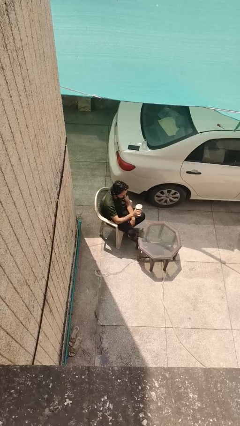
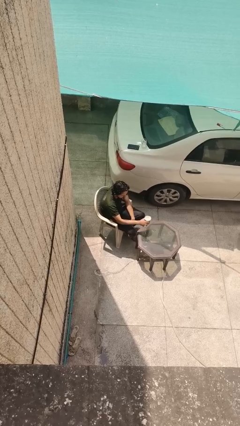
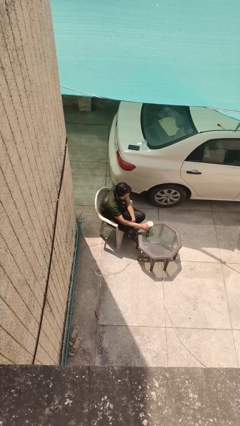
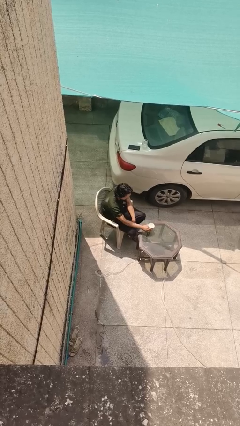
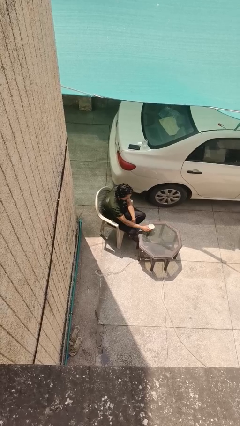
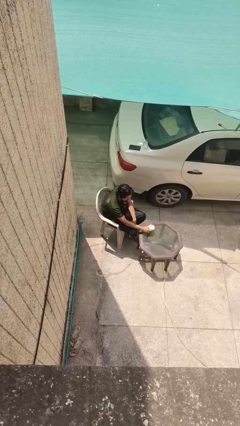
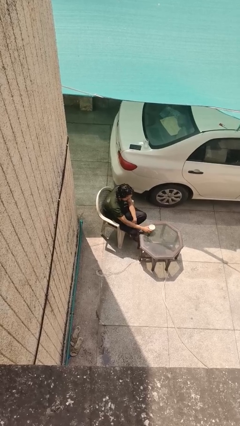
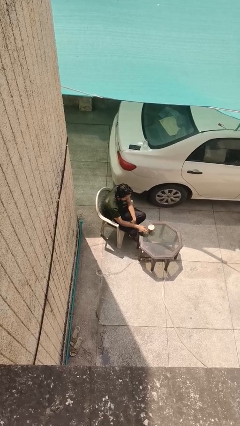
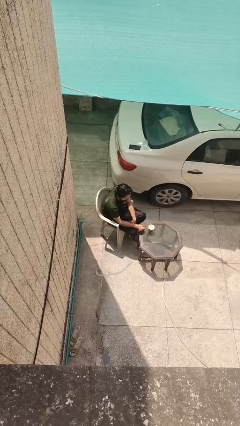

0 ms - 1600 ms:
person puts down object on table

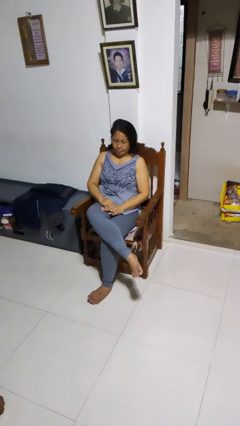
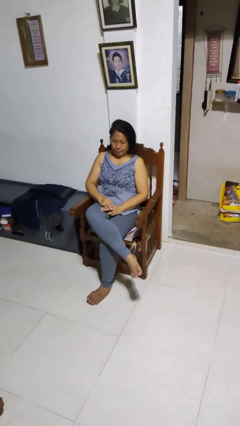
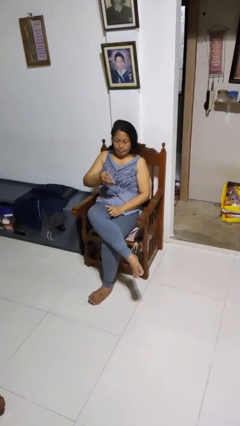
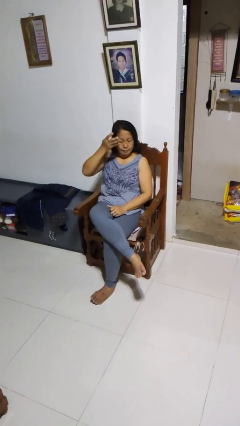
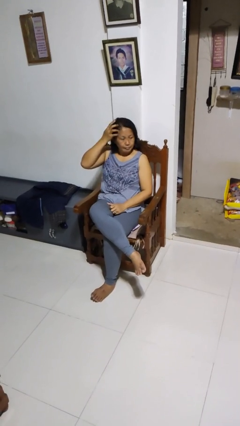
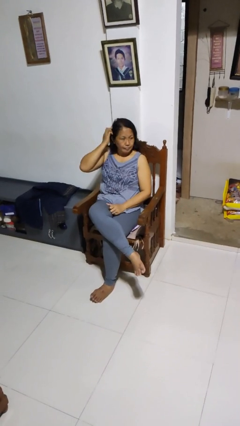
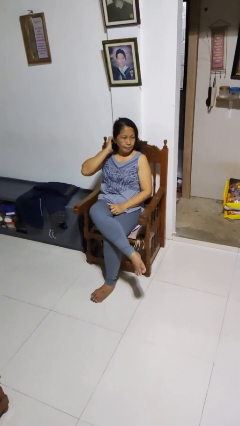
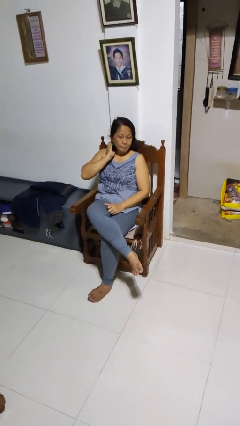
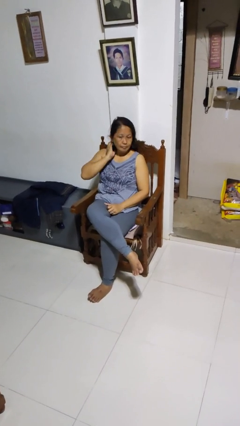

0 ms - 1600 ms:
person strokes hair

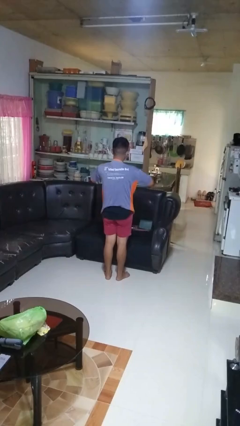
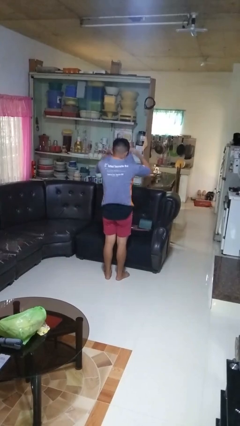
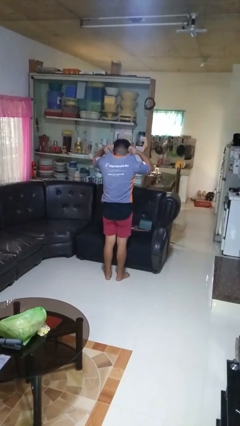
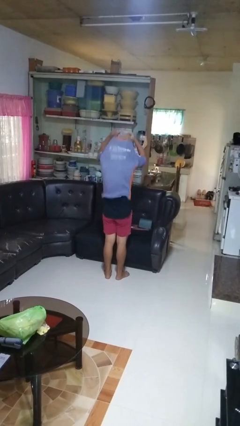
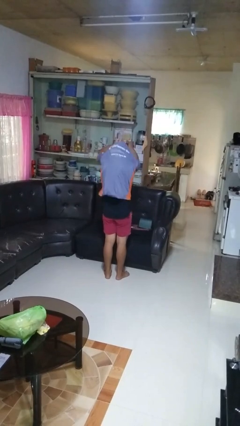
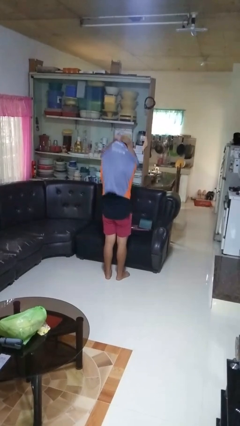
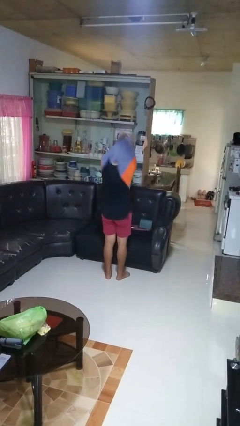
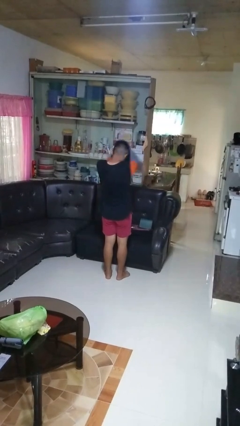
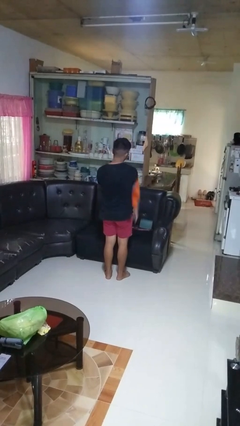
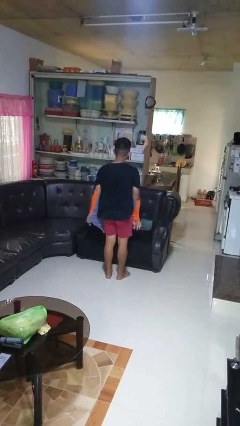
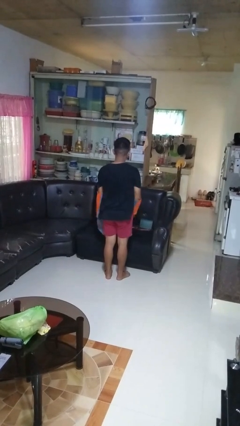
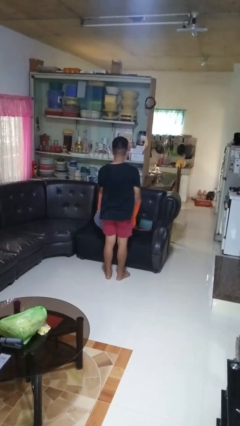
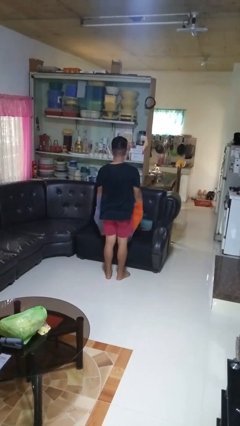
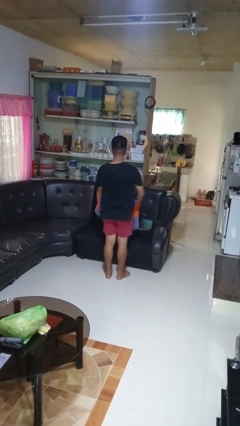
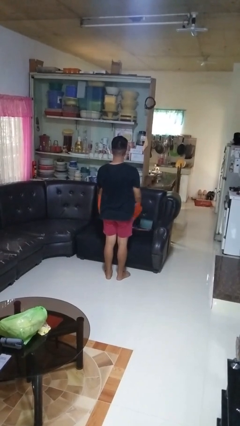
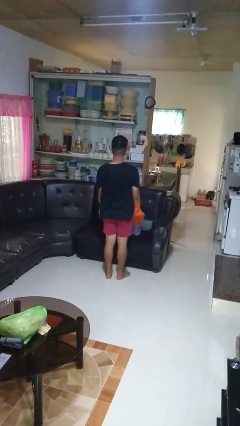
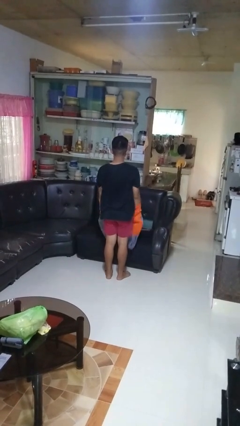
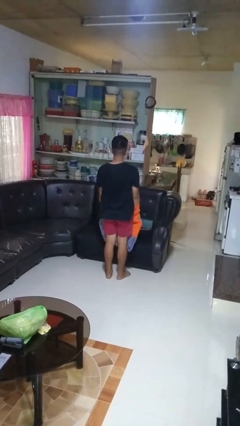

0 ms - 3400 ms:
person takes off shirt

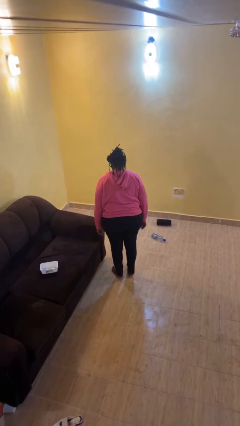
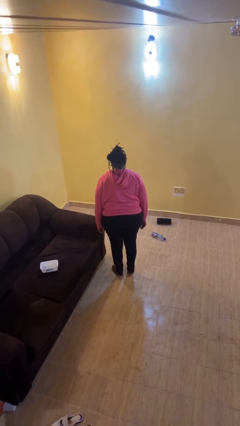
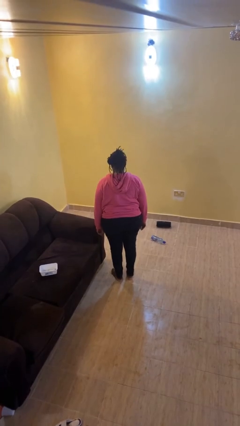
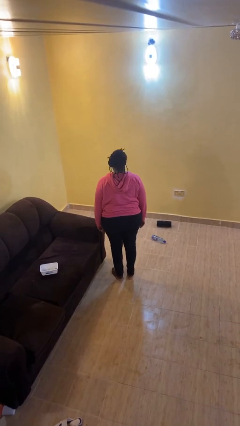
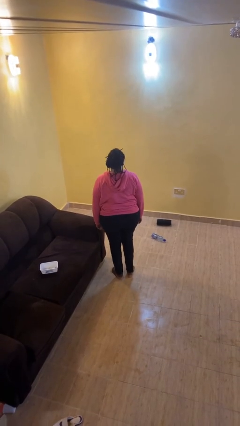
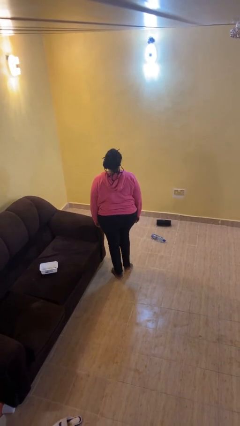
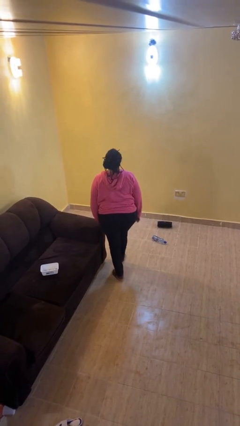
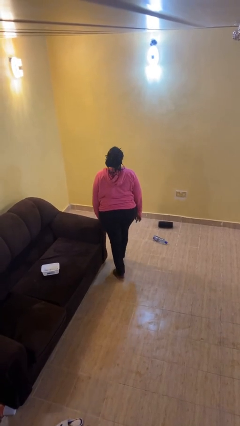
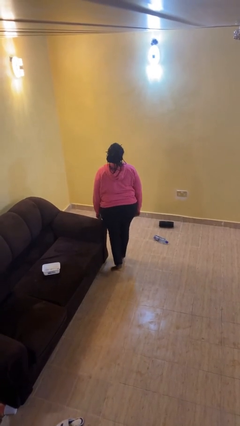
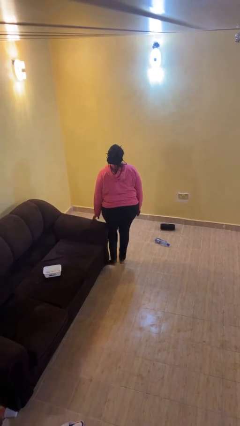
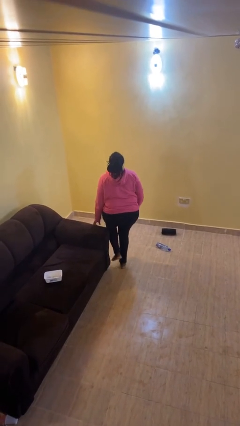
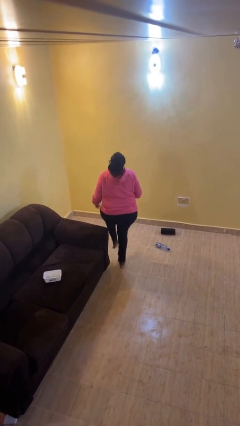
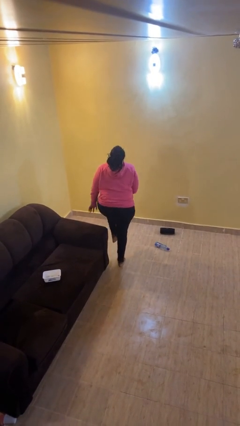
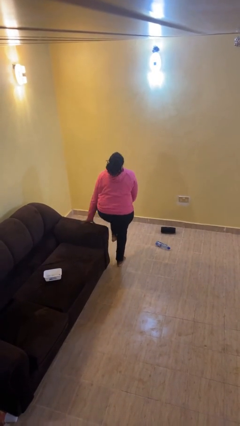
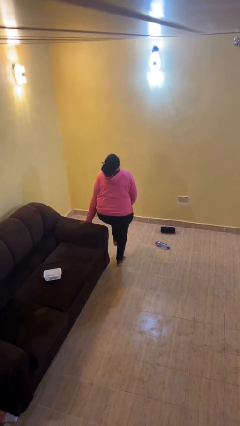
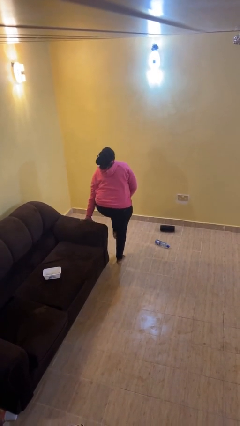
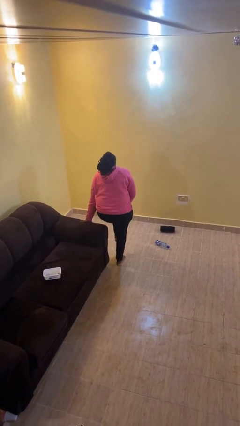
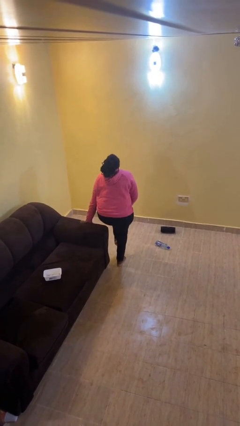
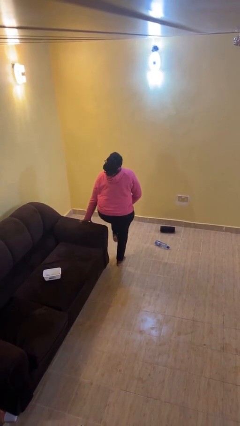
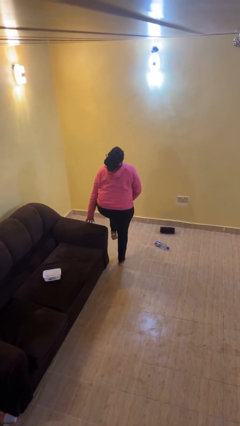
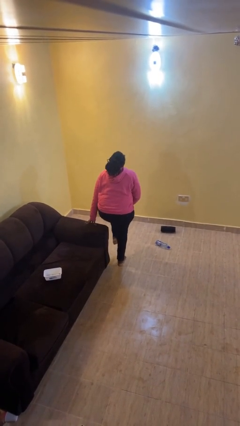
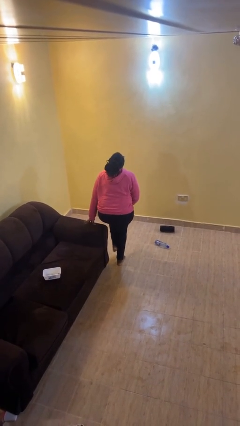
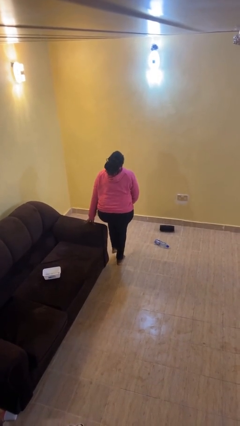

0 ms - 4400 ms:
person stubs toe

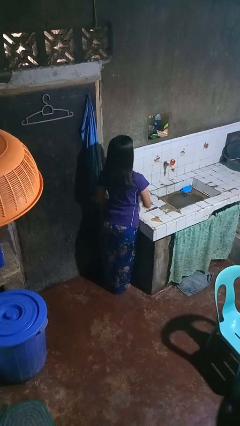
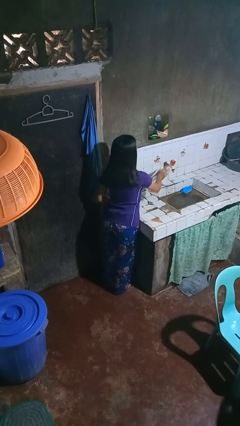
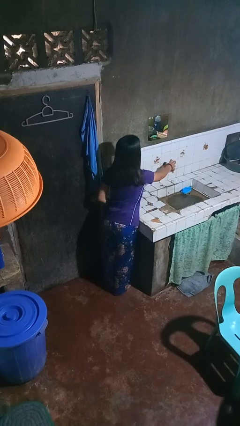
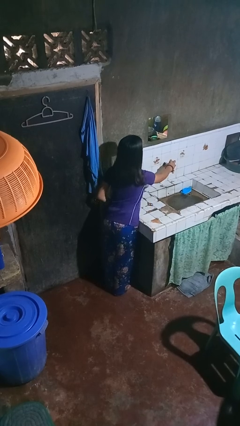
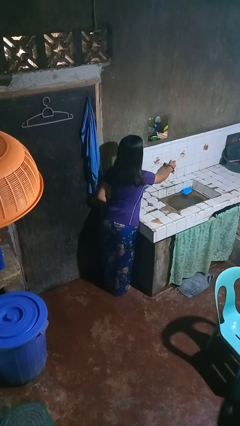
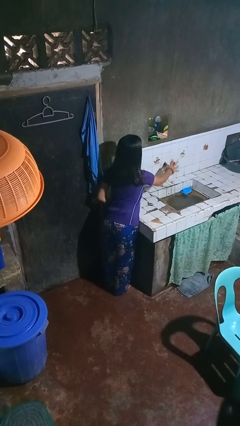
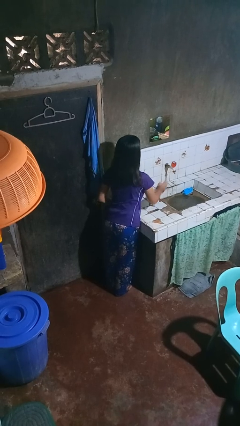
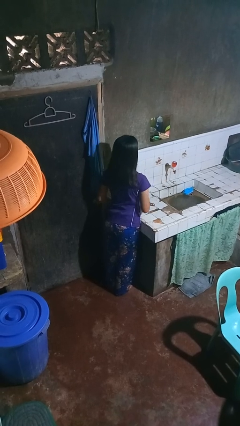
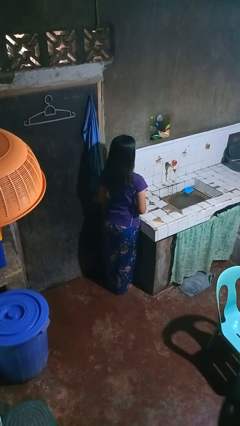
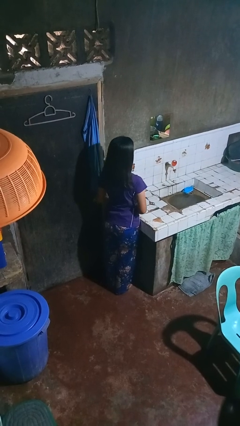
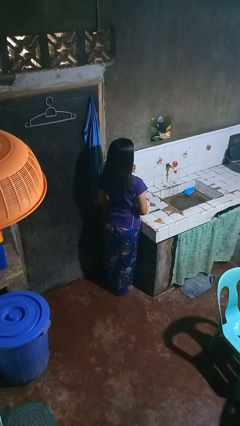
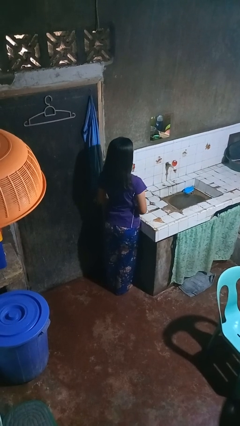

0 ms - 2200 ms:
person turns on faucet

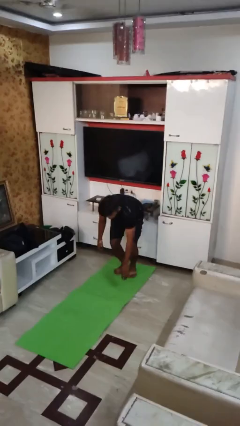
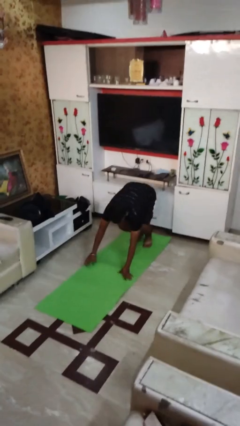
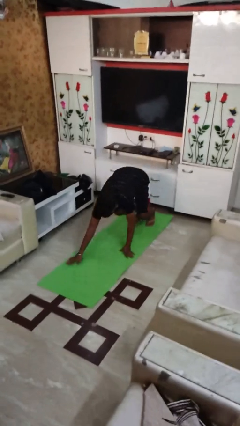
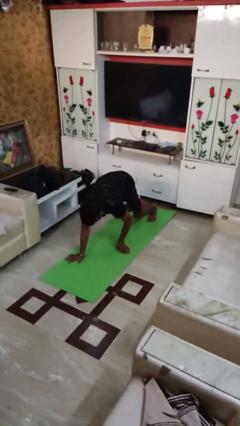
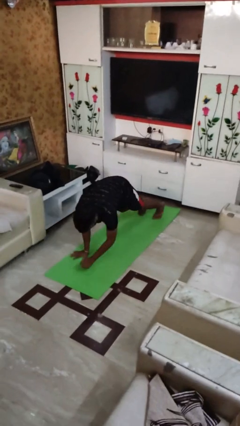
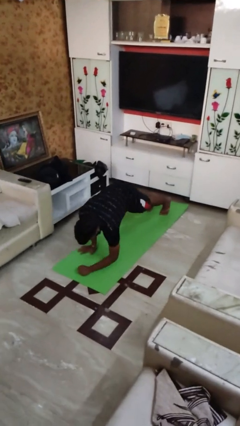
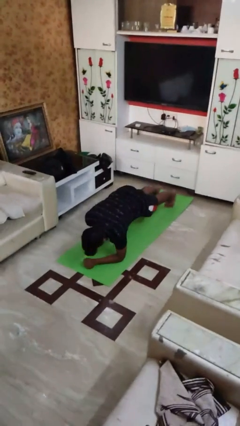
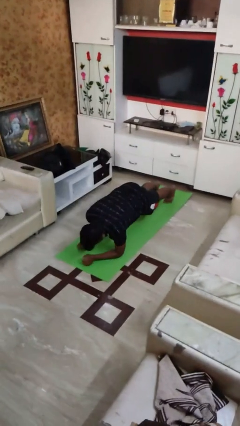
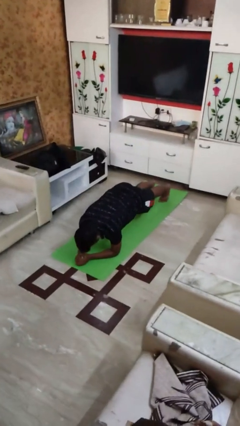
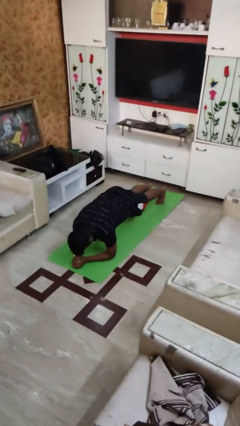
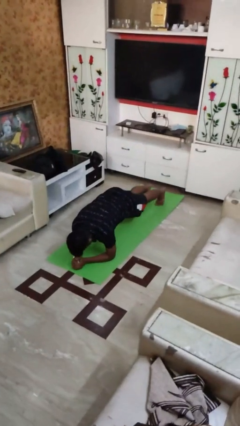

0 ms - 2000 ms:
person exercises with plank

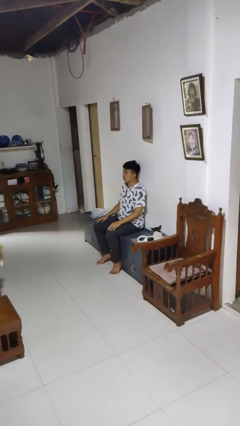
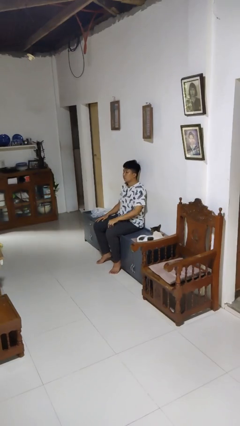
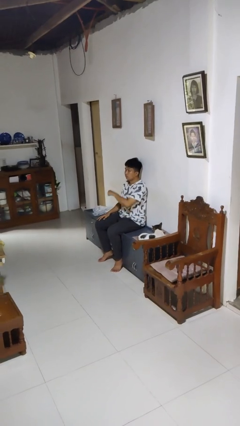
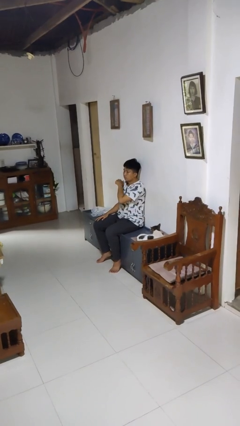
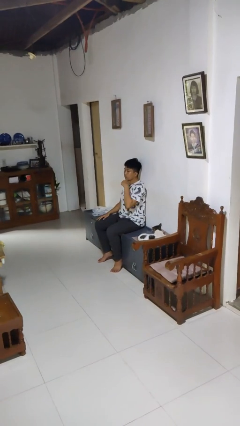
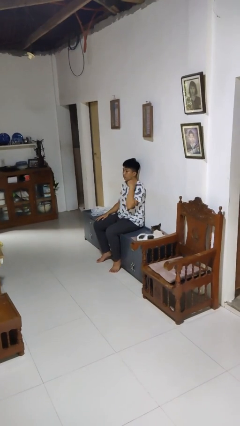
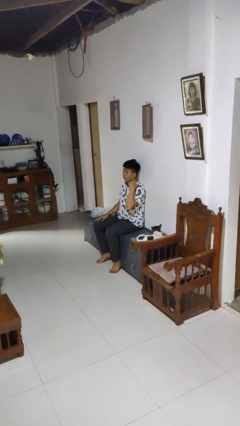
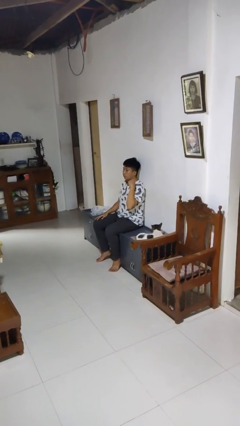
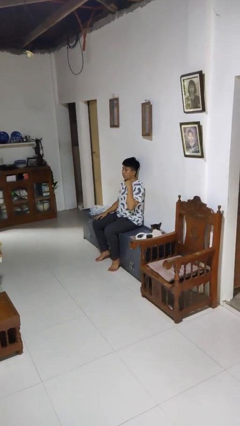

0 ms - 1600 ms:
person gestures cut

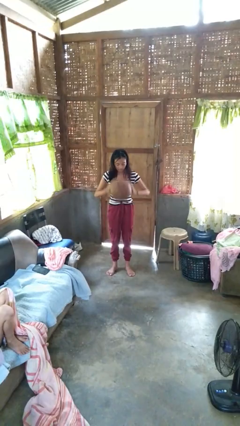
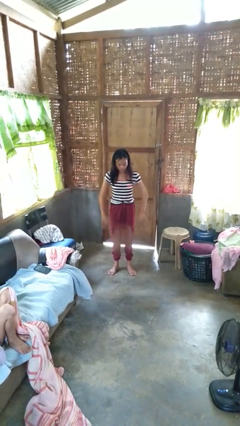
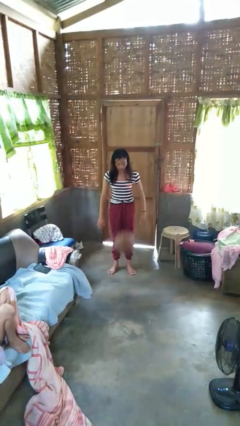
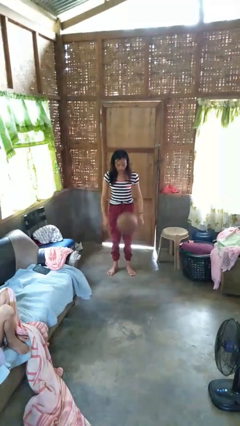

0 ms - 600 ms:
person bounces ball on floor
